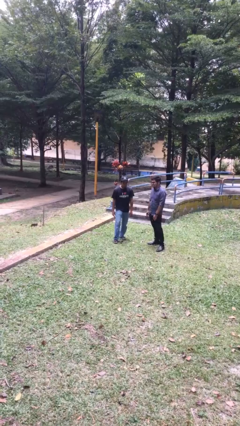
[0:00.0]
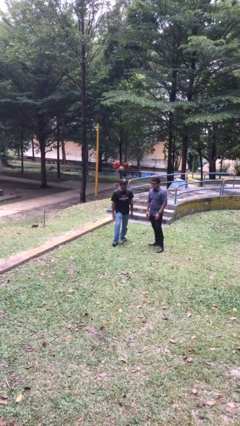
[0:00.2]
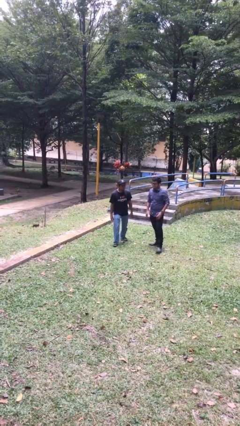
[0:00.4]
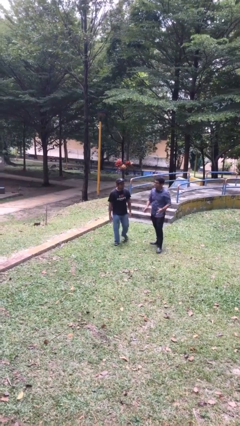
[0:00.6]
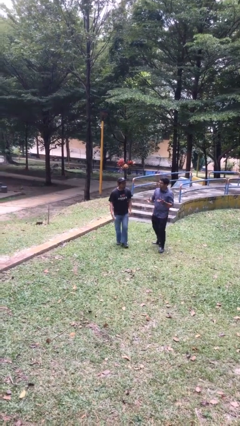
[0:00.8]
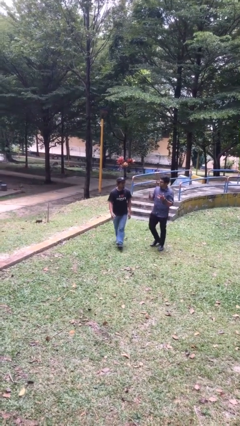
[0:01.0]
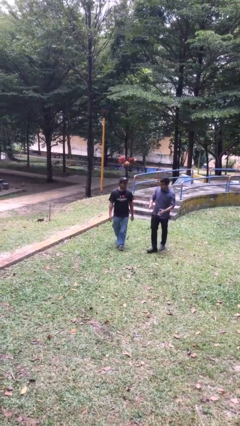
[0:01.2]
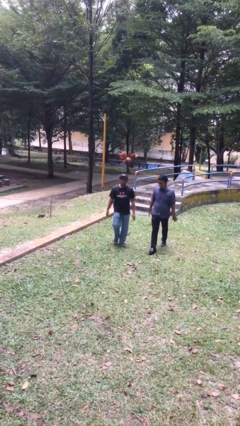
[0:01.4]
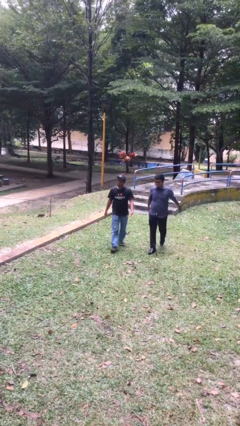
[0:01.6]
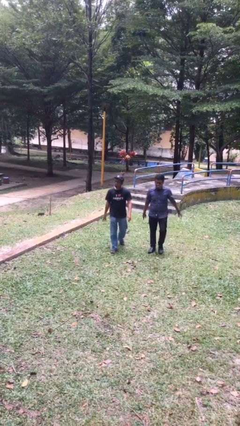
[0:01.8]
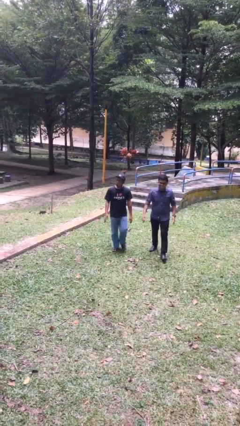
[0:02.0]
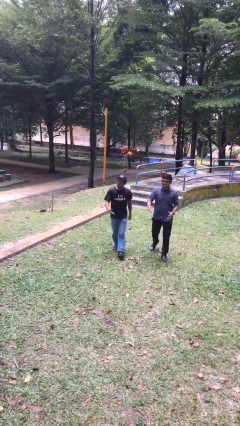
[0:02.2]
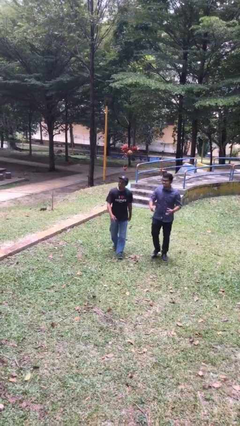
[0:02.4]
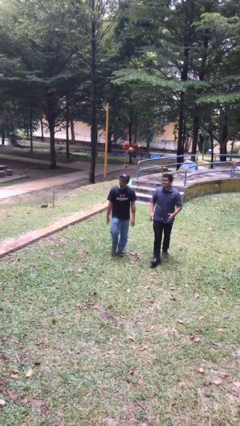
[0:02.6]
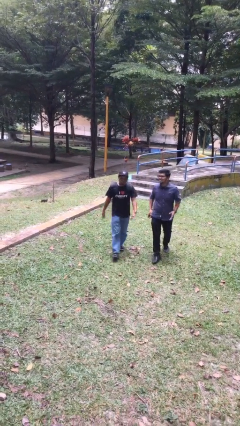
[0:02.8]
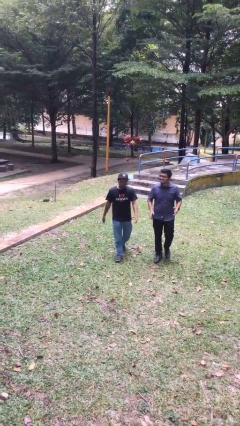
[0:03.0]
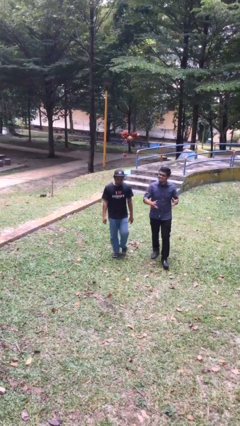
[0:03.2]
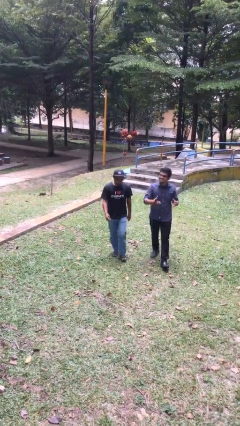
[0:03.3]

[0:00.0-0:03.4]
person talks to person

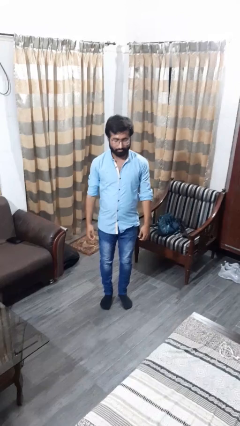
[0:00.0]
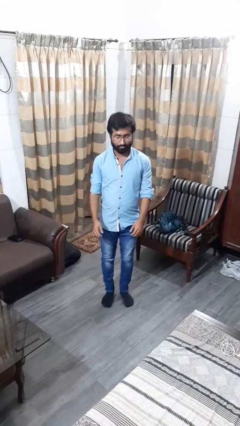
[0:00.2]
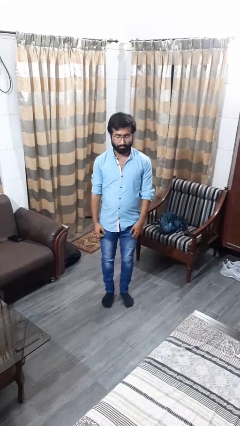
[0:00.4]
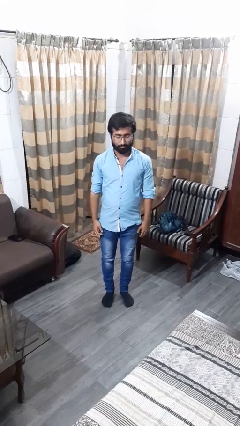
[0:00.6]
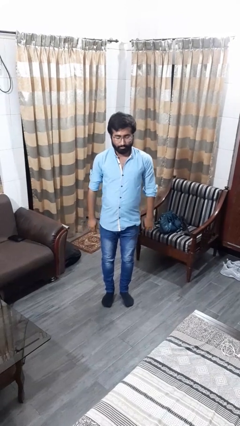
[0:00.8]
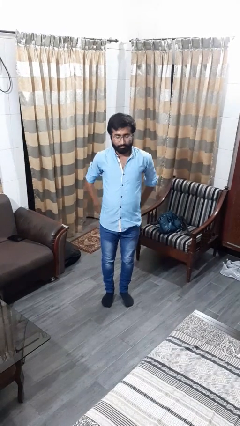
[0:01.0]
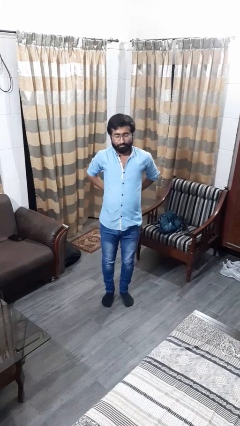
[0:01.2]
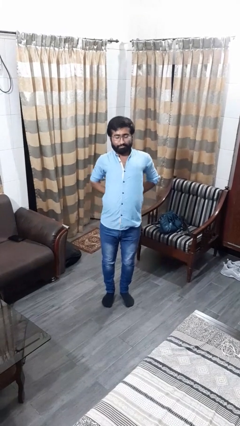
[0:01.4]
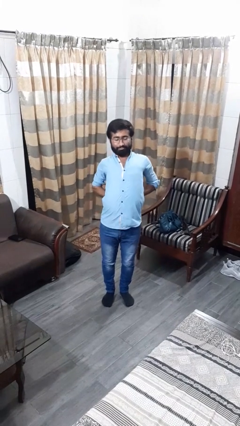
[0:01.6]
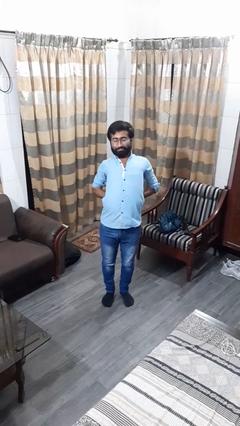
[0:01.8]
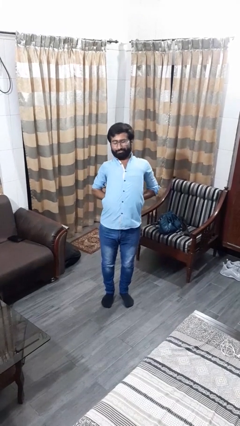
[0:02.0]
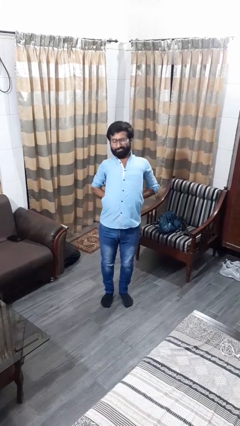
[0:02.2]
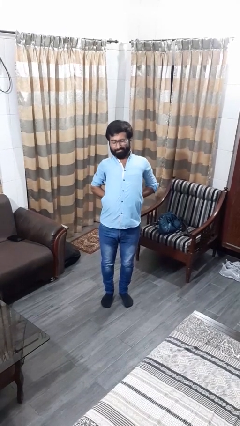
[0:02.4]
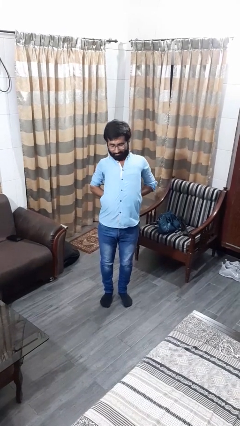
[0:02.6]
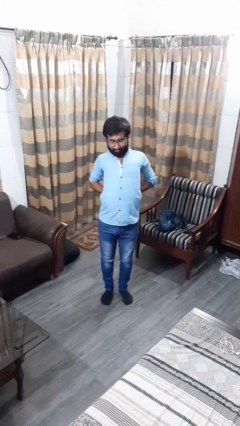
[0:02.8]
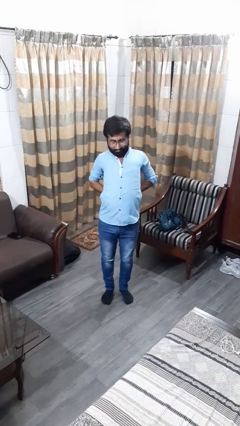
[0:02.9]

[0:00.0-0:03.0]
person stretches back

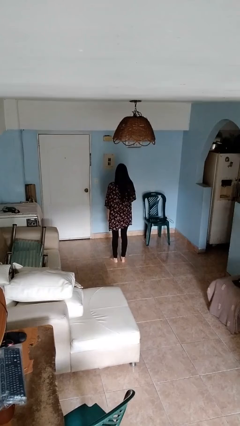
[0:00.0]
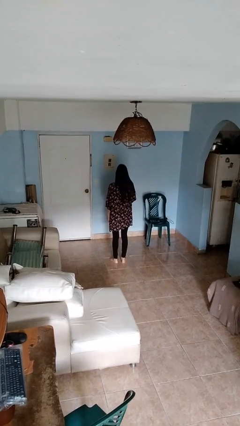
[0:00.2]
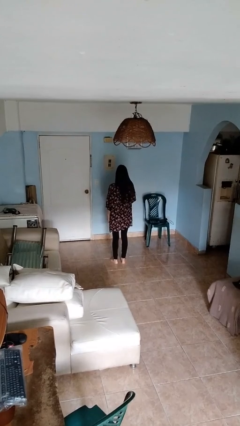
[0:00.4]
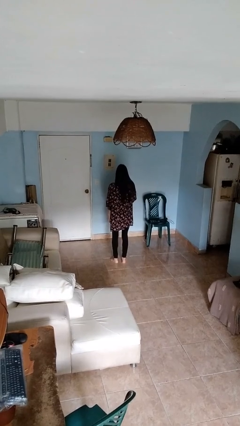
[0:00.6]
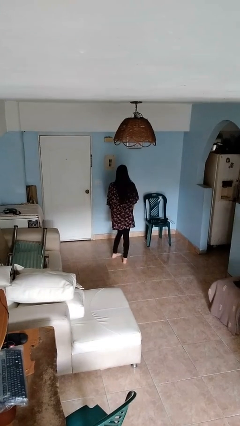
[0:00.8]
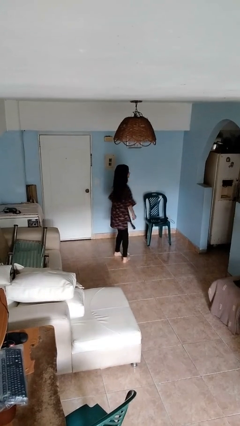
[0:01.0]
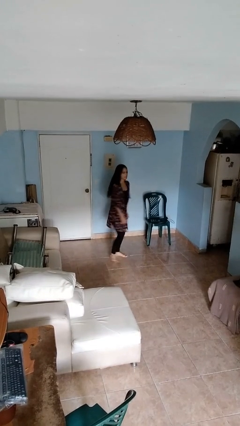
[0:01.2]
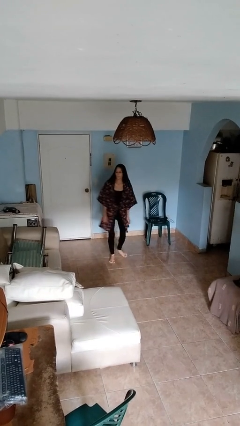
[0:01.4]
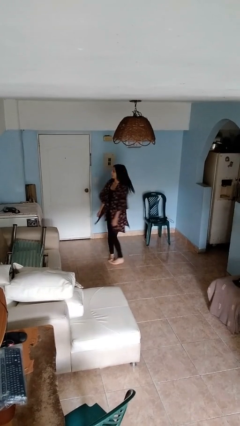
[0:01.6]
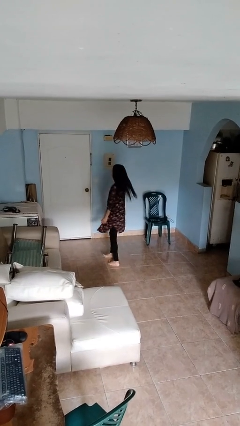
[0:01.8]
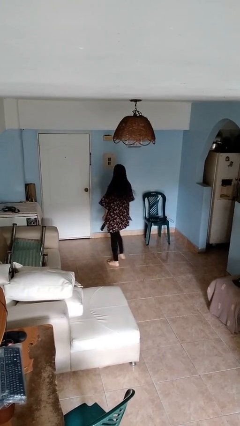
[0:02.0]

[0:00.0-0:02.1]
person twirls

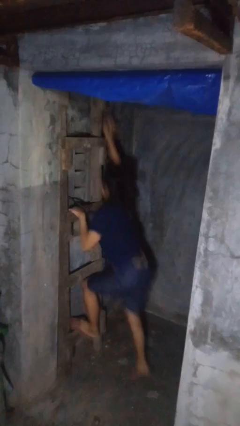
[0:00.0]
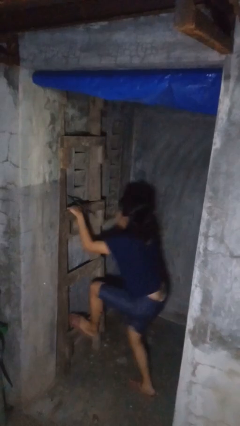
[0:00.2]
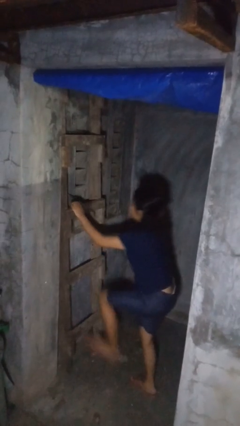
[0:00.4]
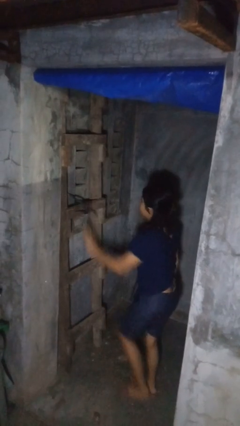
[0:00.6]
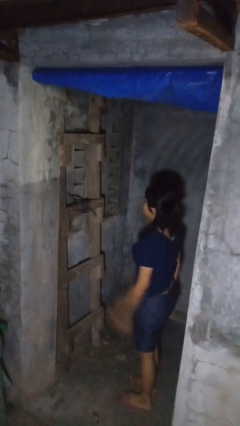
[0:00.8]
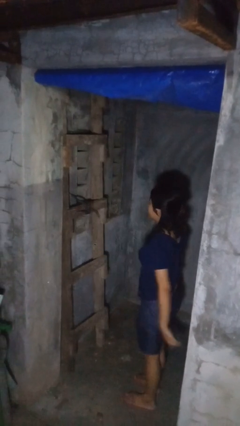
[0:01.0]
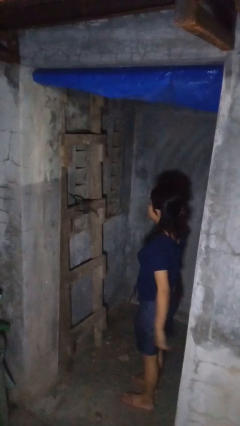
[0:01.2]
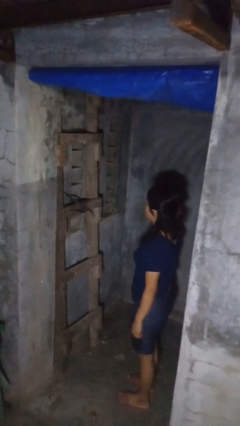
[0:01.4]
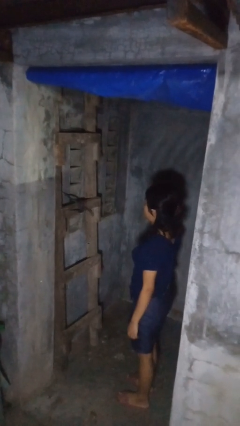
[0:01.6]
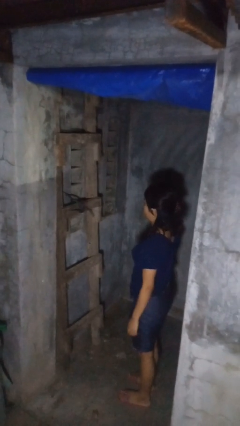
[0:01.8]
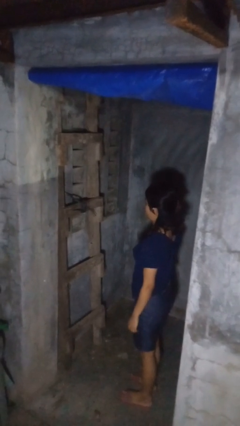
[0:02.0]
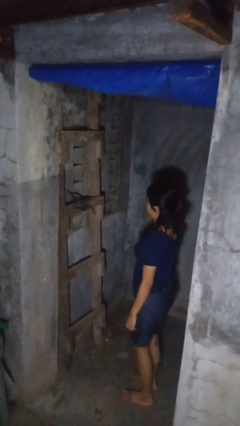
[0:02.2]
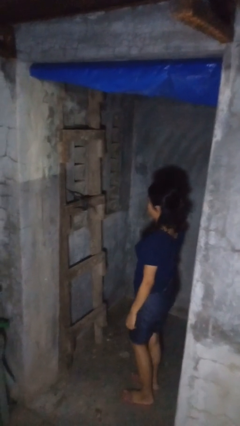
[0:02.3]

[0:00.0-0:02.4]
person climbs down ladder

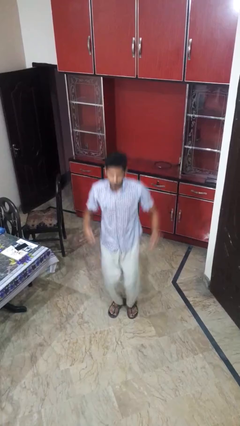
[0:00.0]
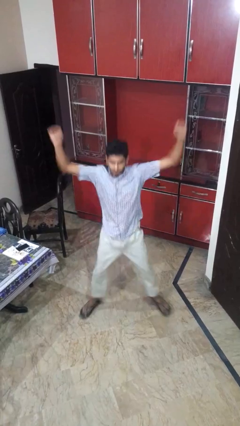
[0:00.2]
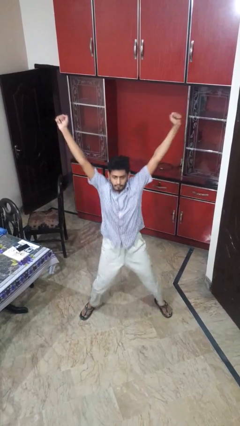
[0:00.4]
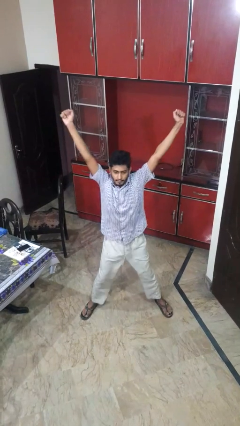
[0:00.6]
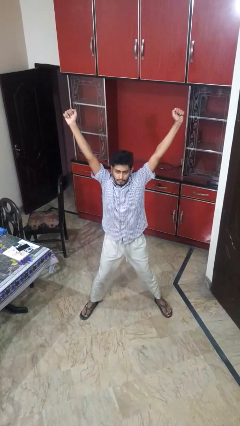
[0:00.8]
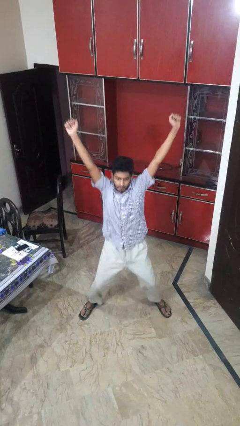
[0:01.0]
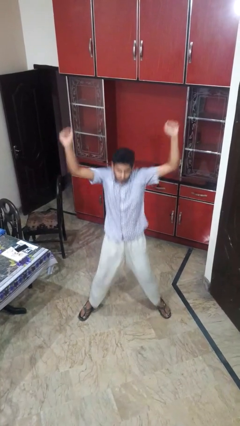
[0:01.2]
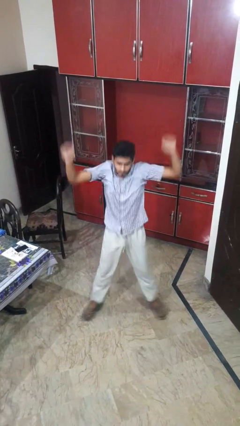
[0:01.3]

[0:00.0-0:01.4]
person exercises with jumping jacks

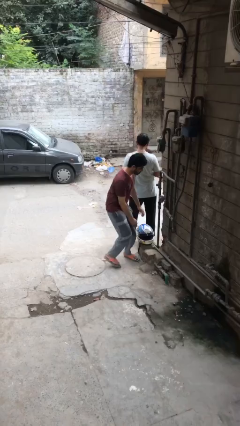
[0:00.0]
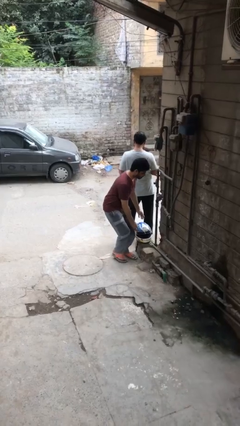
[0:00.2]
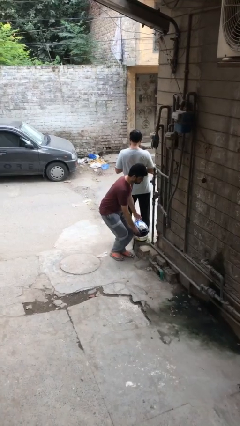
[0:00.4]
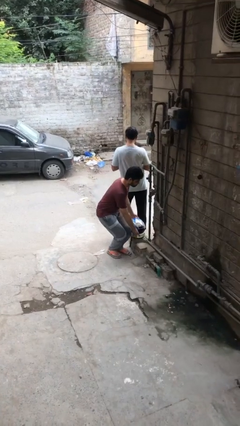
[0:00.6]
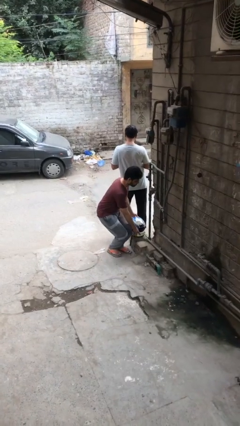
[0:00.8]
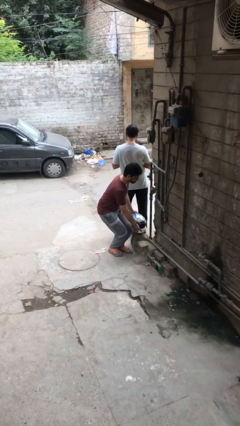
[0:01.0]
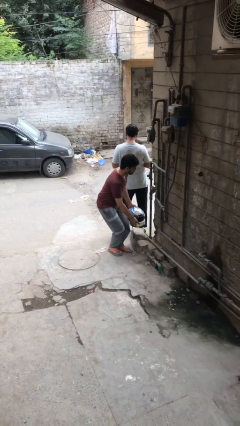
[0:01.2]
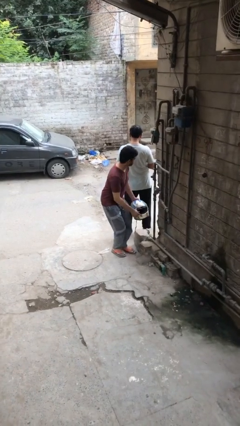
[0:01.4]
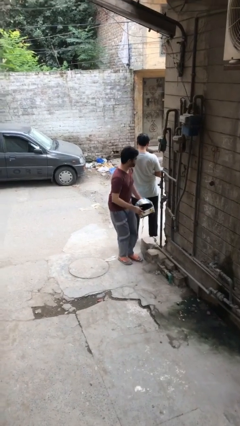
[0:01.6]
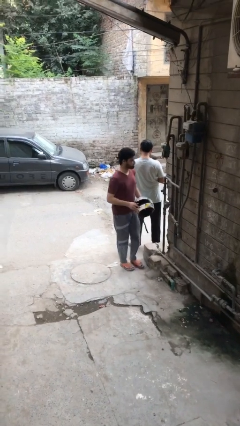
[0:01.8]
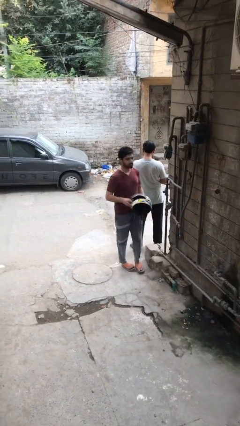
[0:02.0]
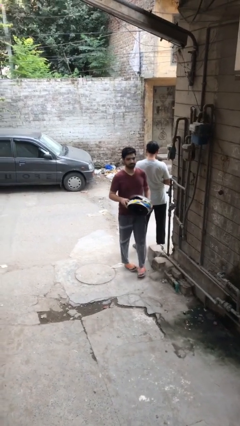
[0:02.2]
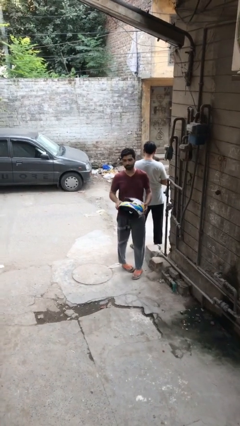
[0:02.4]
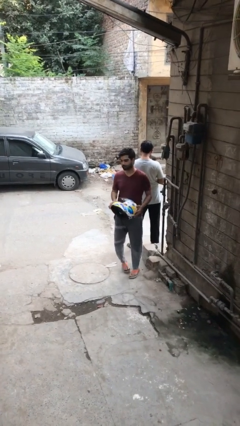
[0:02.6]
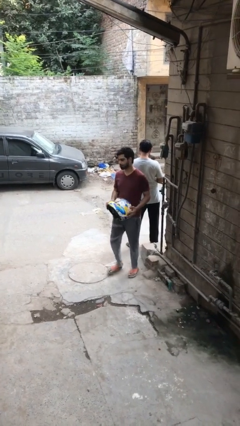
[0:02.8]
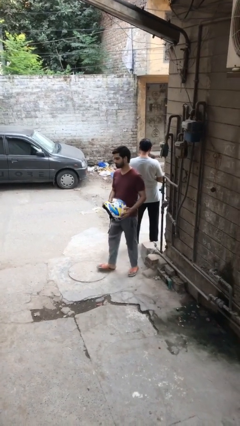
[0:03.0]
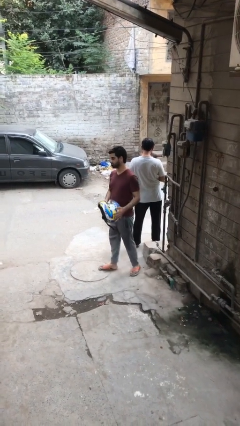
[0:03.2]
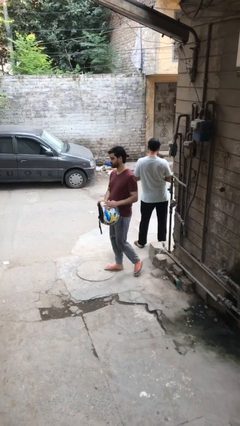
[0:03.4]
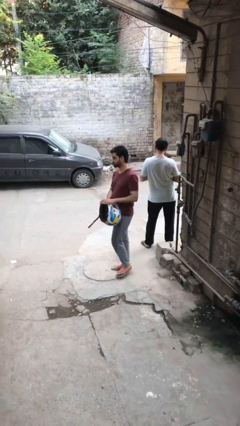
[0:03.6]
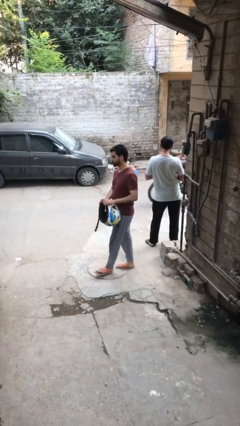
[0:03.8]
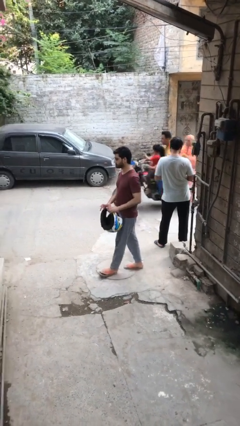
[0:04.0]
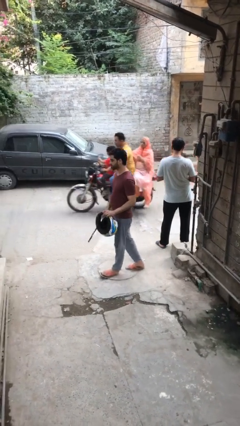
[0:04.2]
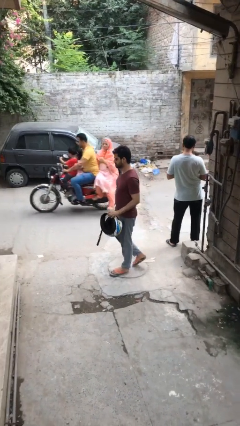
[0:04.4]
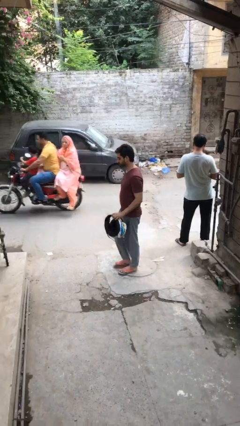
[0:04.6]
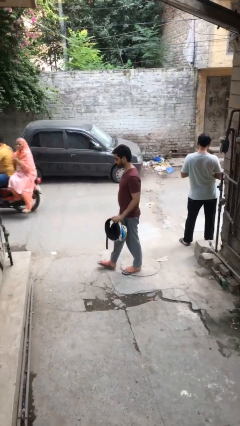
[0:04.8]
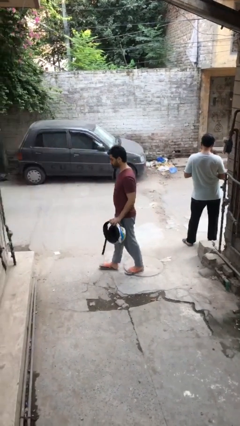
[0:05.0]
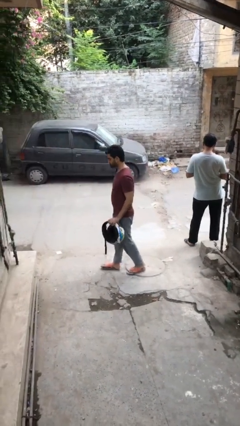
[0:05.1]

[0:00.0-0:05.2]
person steals object from person
